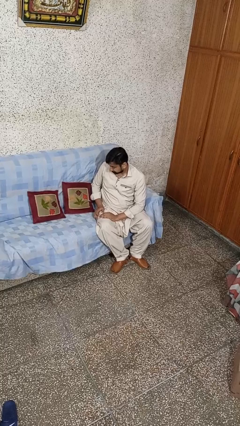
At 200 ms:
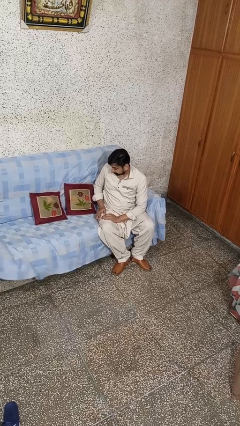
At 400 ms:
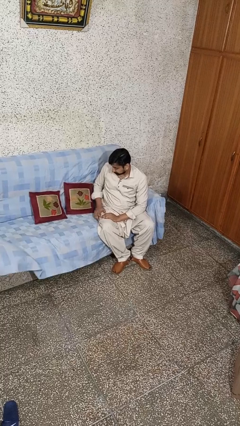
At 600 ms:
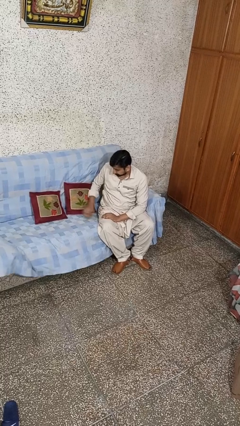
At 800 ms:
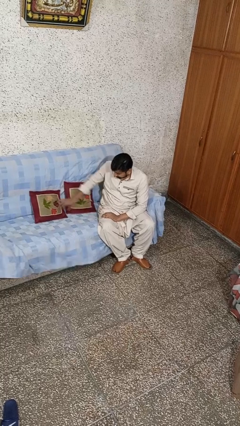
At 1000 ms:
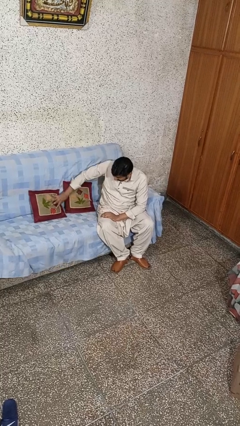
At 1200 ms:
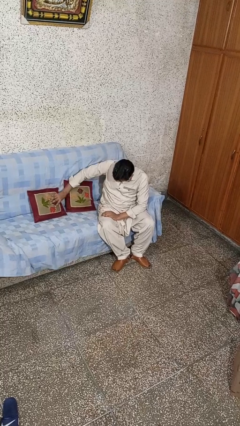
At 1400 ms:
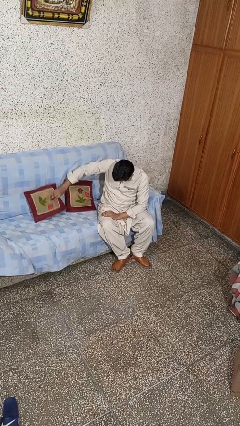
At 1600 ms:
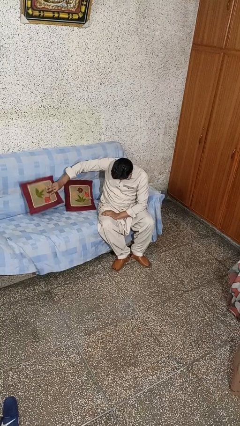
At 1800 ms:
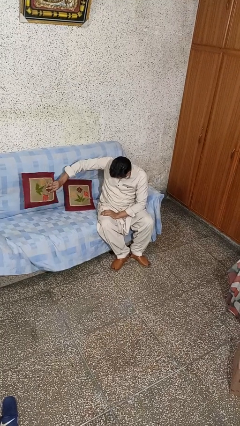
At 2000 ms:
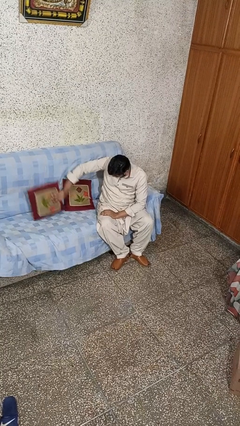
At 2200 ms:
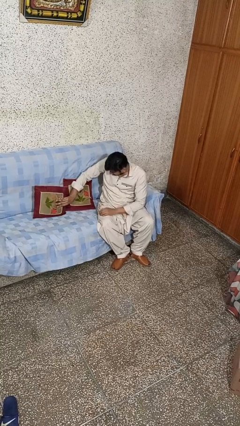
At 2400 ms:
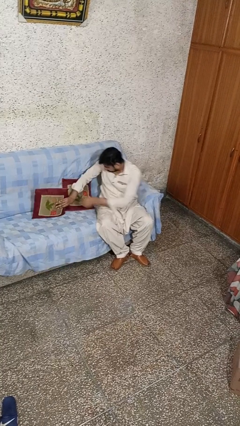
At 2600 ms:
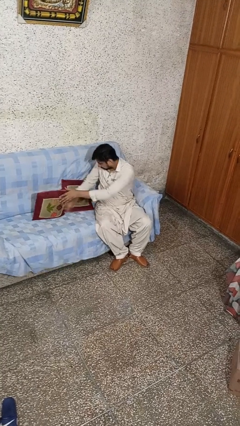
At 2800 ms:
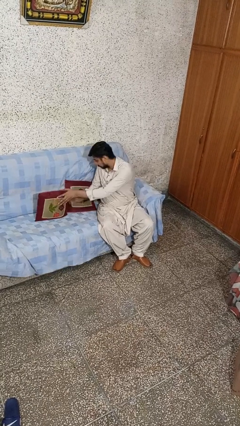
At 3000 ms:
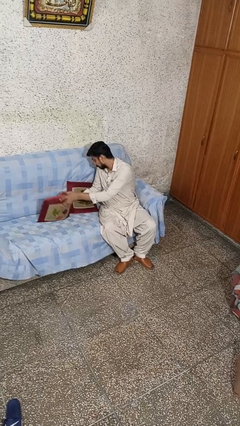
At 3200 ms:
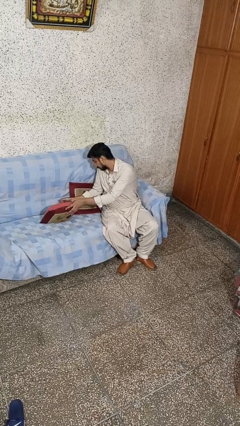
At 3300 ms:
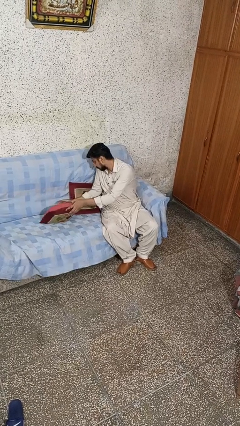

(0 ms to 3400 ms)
person searches in couch

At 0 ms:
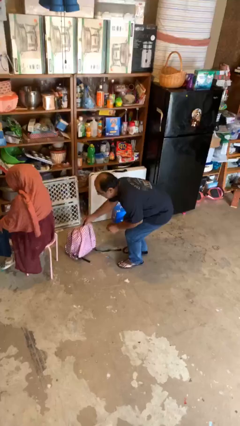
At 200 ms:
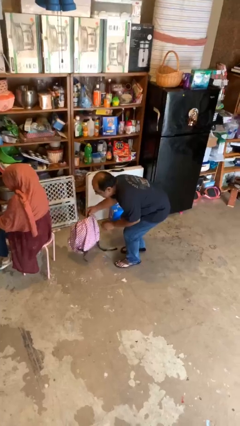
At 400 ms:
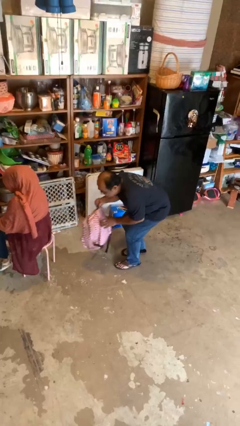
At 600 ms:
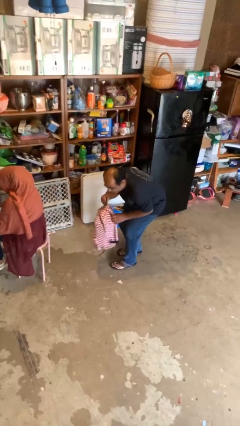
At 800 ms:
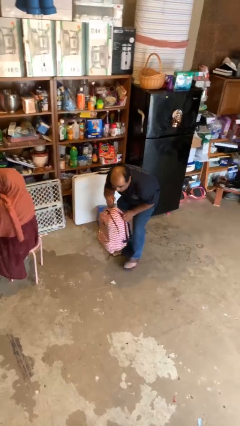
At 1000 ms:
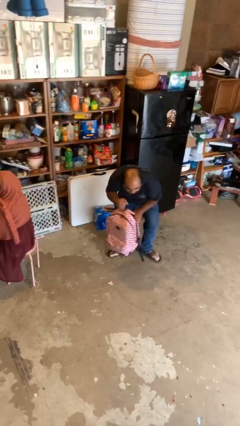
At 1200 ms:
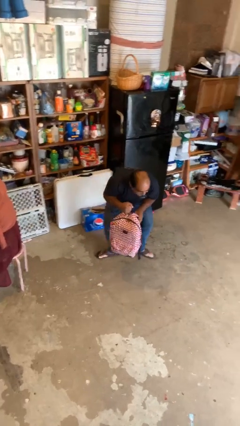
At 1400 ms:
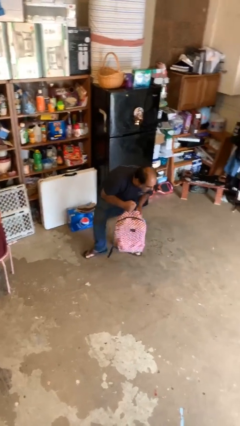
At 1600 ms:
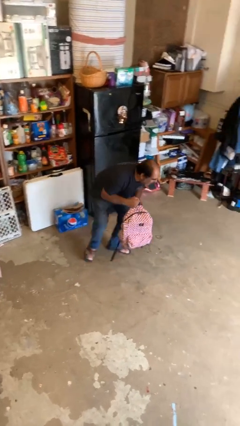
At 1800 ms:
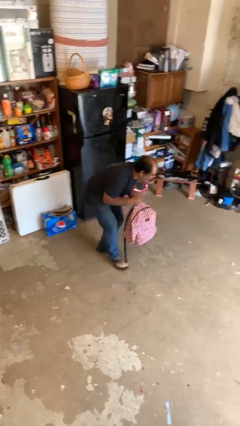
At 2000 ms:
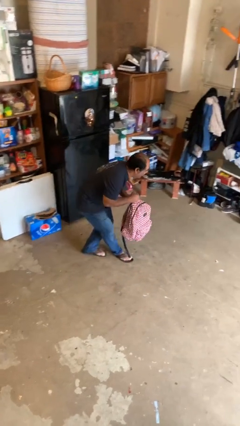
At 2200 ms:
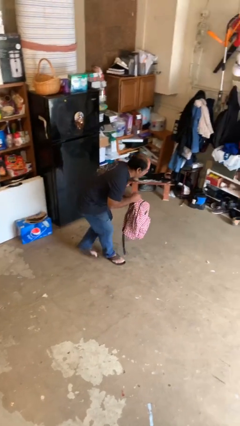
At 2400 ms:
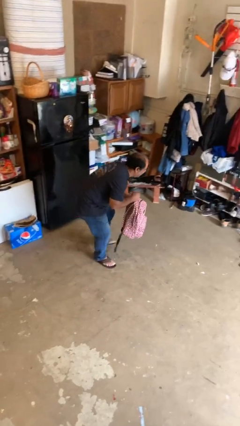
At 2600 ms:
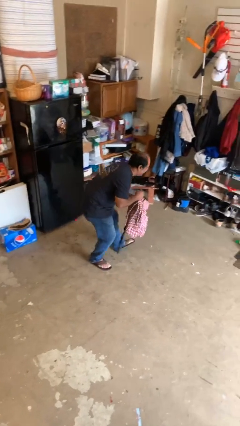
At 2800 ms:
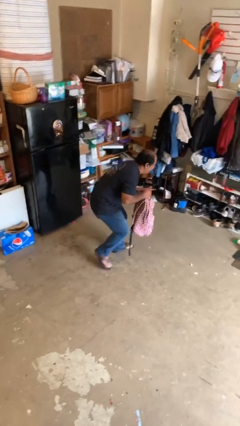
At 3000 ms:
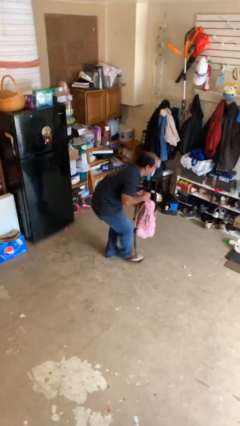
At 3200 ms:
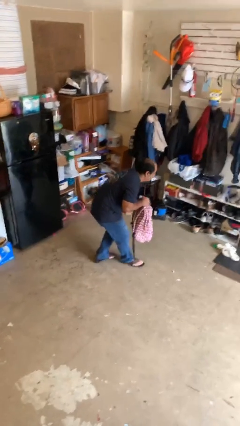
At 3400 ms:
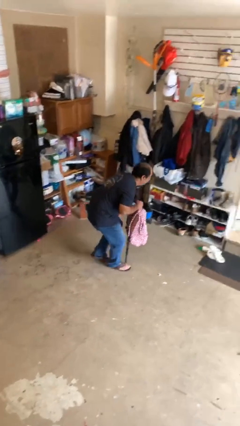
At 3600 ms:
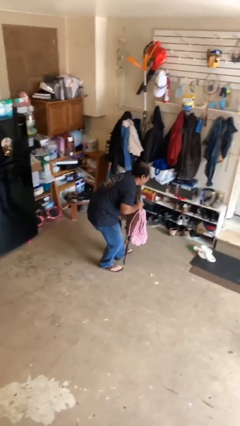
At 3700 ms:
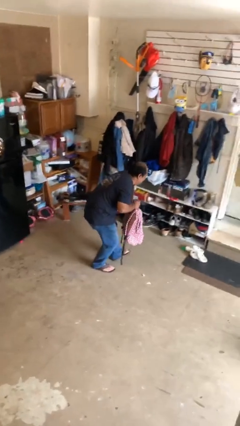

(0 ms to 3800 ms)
person steals object from person

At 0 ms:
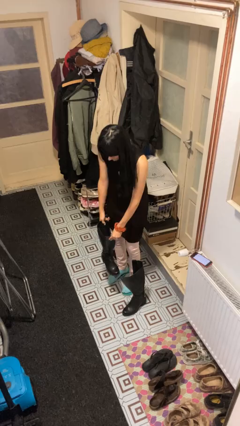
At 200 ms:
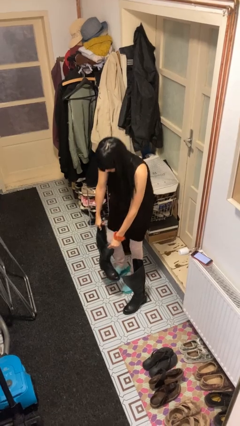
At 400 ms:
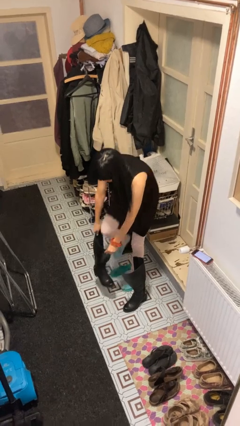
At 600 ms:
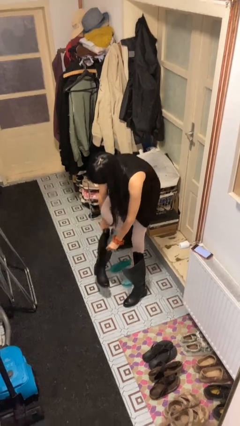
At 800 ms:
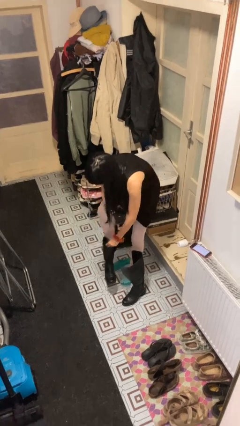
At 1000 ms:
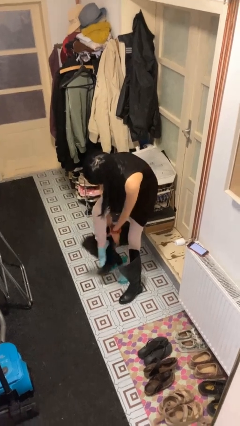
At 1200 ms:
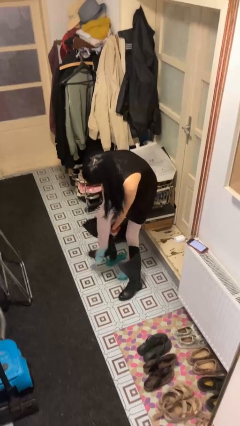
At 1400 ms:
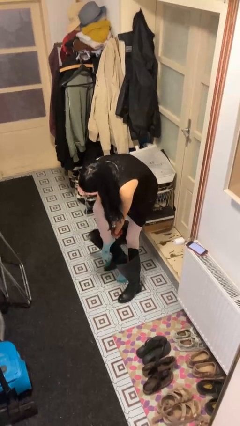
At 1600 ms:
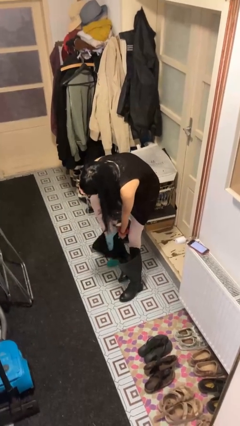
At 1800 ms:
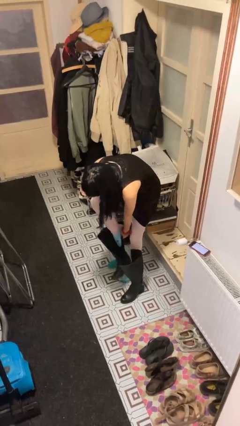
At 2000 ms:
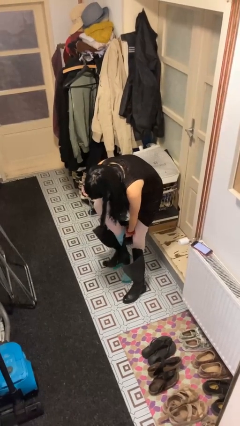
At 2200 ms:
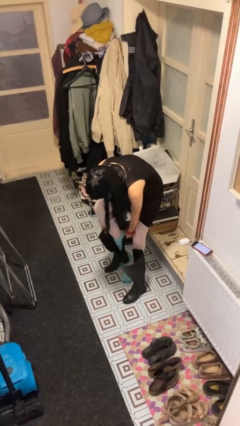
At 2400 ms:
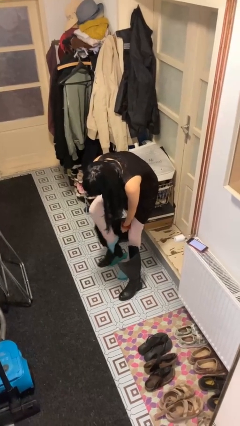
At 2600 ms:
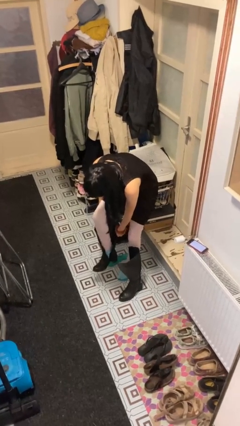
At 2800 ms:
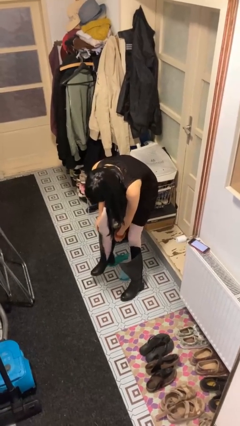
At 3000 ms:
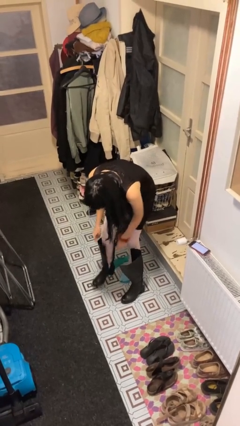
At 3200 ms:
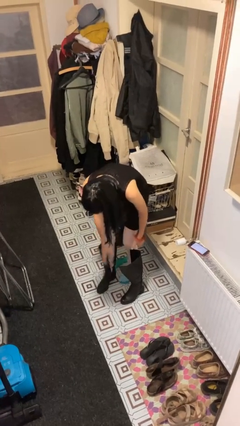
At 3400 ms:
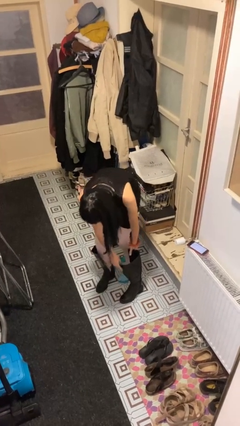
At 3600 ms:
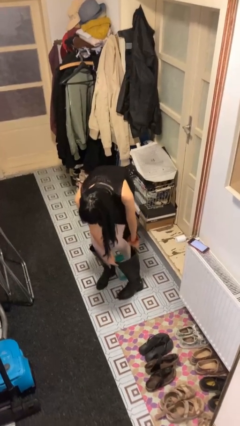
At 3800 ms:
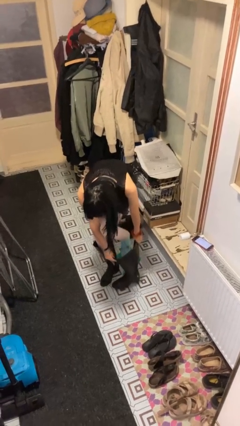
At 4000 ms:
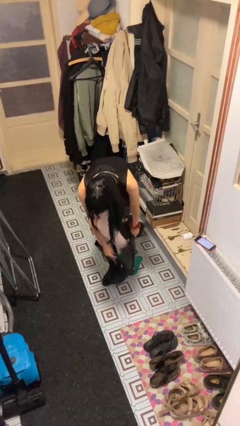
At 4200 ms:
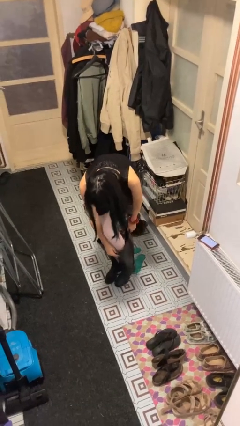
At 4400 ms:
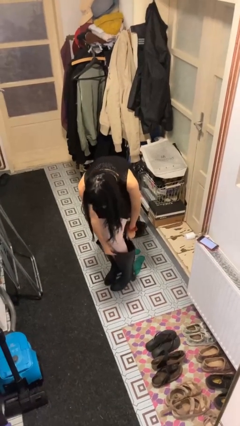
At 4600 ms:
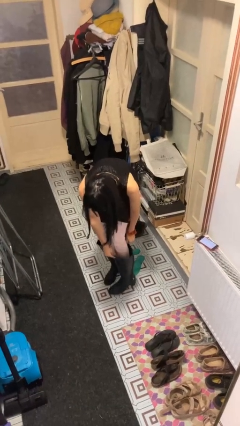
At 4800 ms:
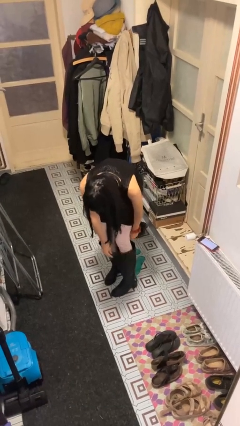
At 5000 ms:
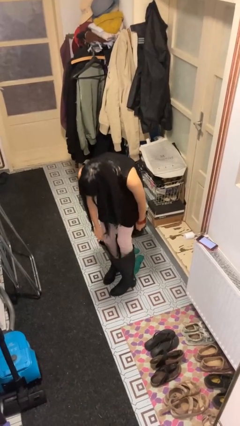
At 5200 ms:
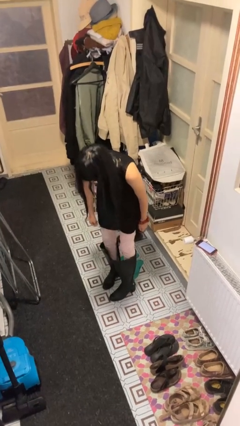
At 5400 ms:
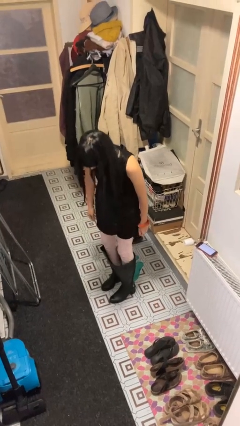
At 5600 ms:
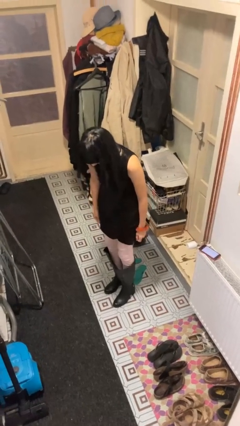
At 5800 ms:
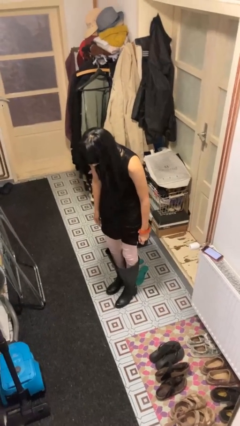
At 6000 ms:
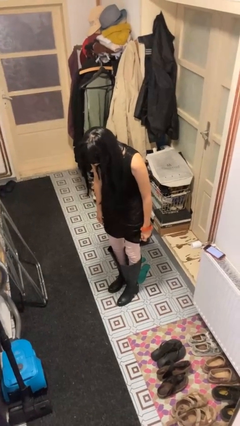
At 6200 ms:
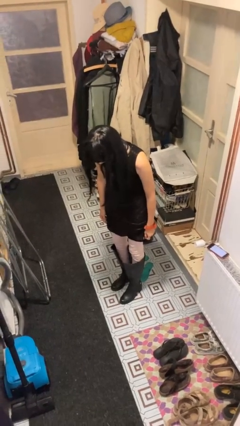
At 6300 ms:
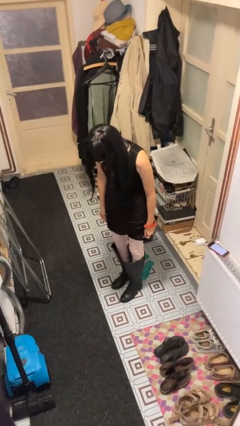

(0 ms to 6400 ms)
person puts on boots

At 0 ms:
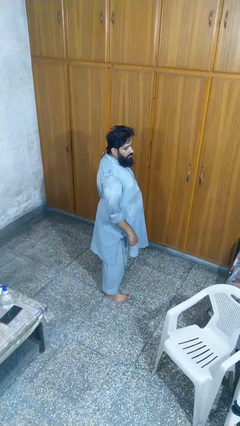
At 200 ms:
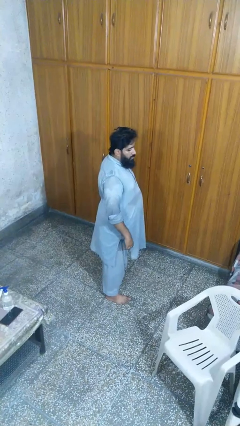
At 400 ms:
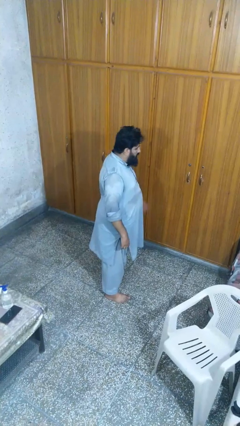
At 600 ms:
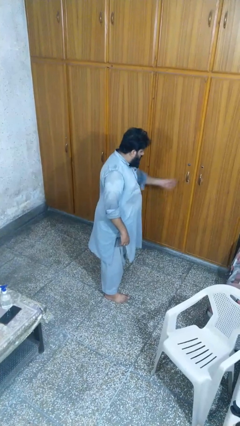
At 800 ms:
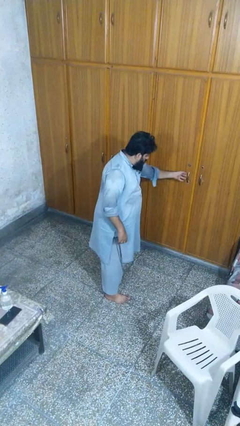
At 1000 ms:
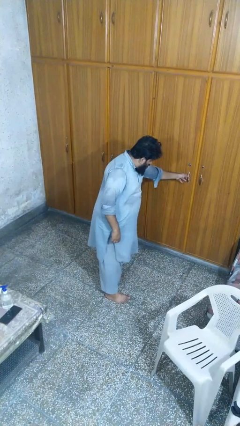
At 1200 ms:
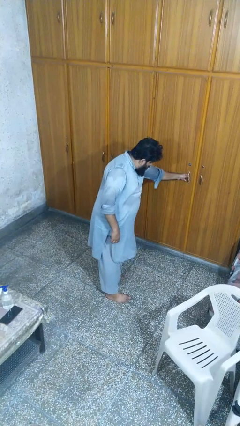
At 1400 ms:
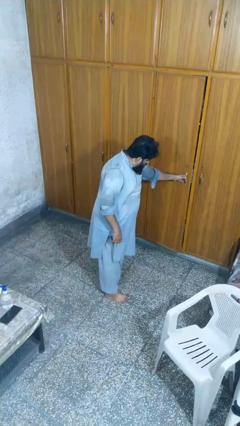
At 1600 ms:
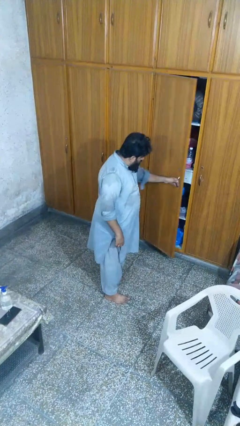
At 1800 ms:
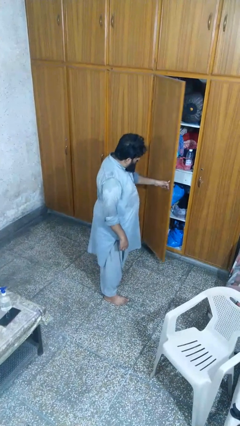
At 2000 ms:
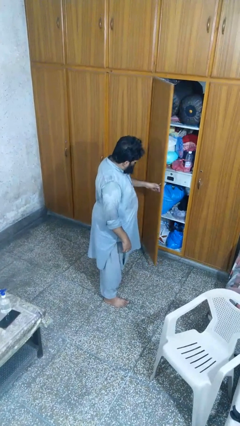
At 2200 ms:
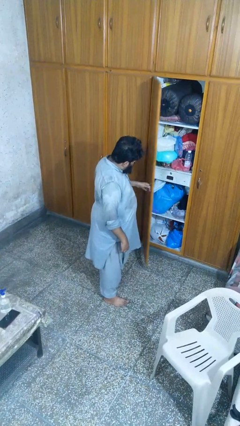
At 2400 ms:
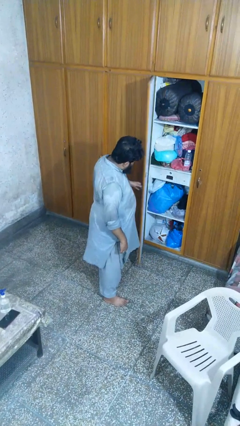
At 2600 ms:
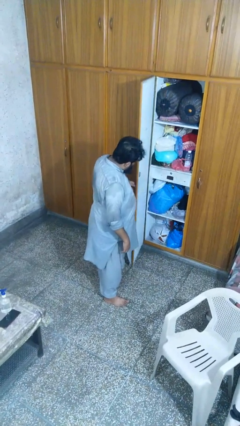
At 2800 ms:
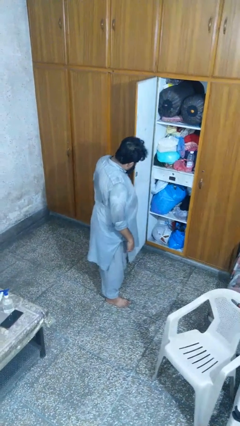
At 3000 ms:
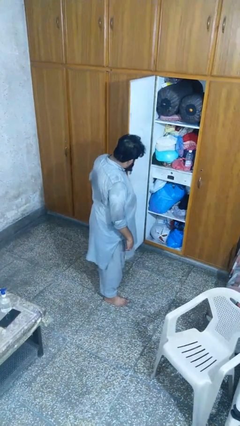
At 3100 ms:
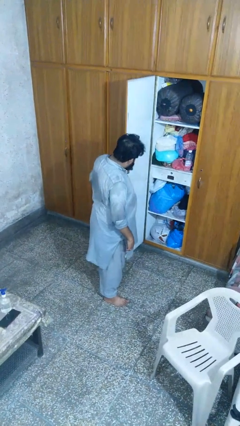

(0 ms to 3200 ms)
person opens closet door

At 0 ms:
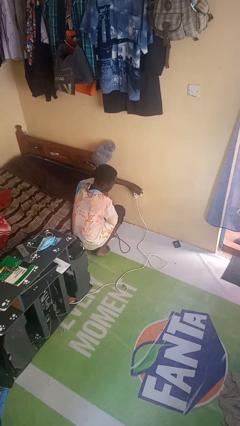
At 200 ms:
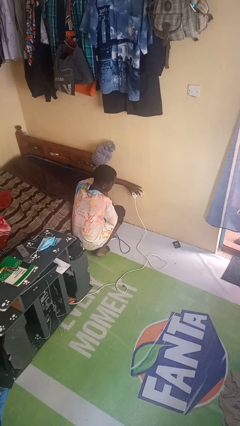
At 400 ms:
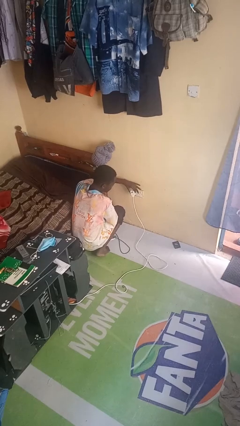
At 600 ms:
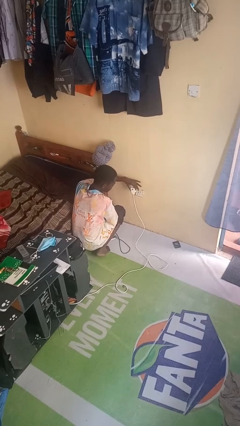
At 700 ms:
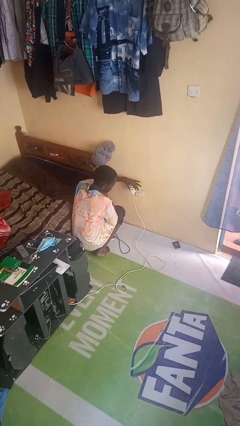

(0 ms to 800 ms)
person unplugs from electrical socket
